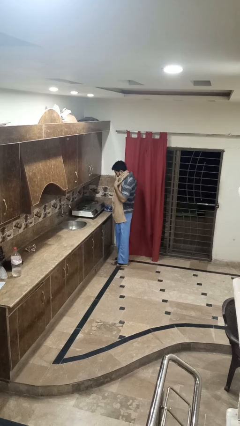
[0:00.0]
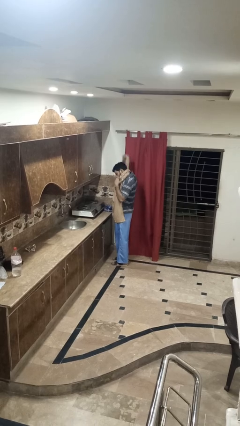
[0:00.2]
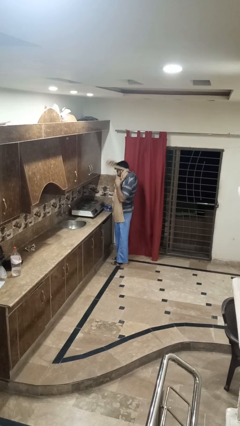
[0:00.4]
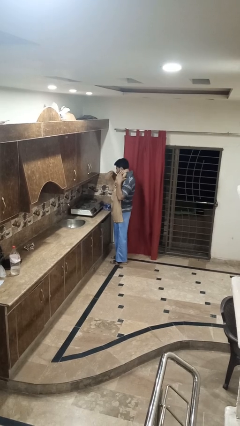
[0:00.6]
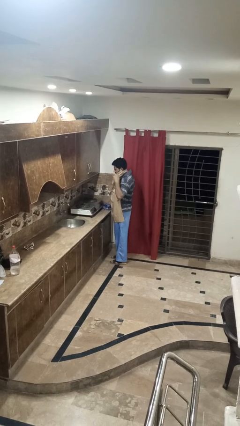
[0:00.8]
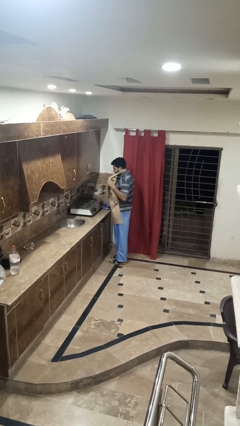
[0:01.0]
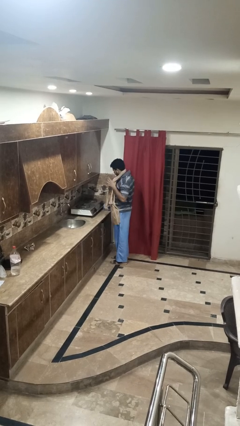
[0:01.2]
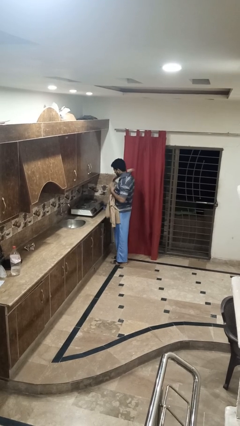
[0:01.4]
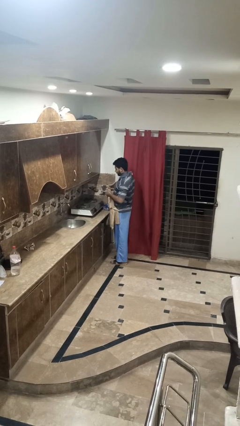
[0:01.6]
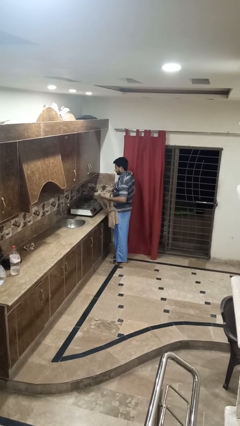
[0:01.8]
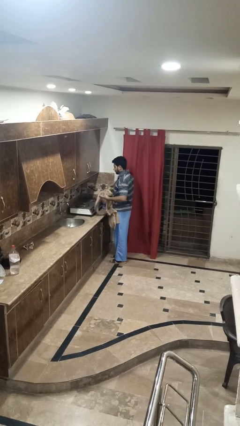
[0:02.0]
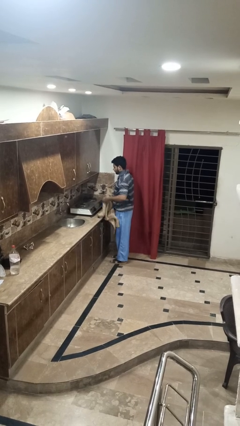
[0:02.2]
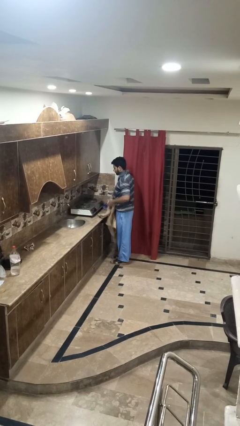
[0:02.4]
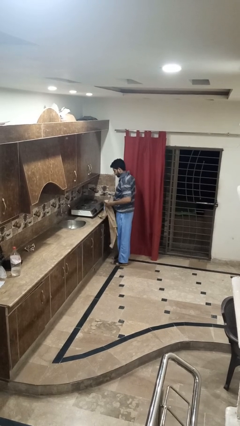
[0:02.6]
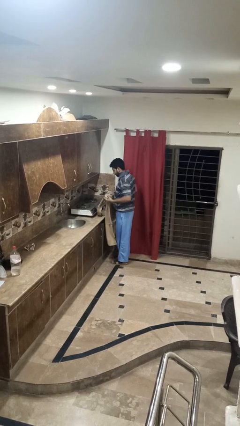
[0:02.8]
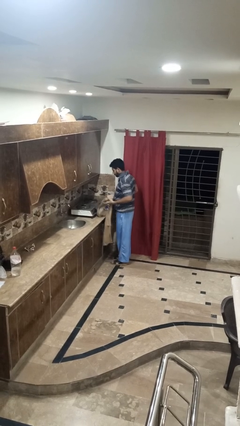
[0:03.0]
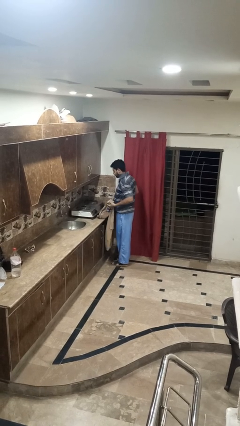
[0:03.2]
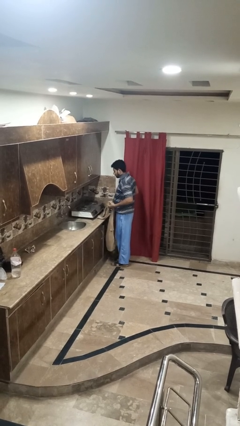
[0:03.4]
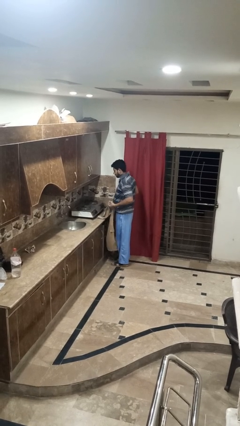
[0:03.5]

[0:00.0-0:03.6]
person takes off apron

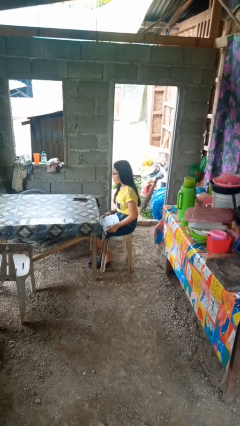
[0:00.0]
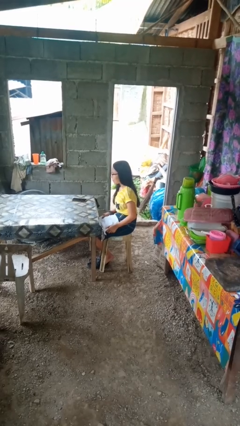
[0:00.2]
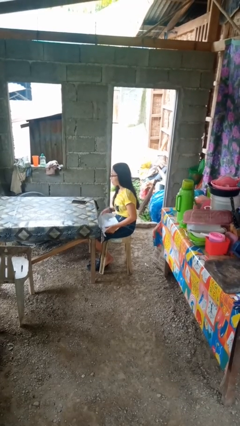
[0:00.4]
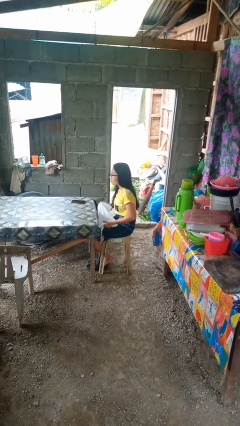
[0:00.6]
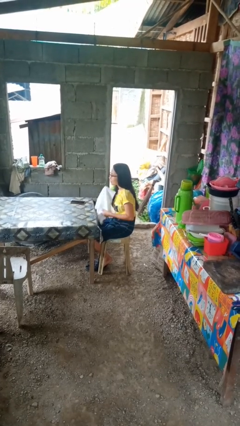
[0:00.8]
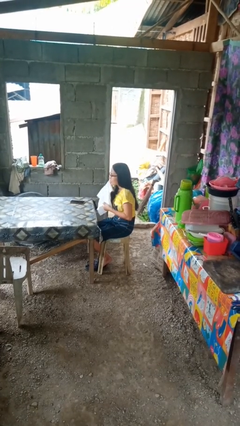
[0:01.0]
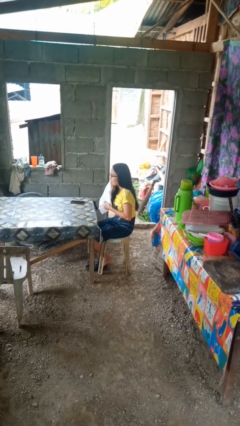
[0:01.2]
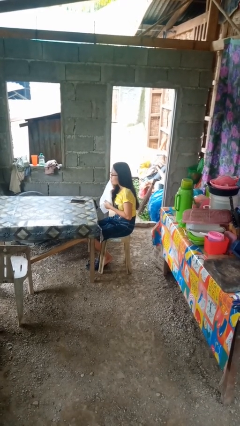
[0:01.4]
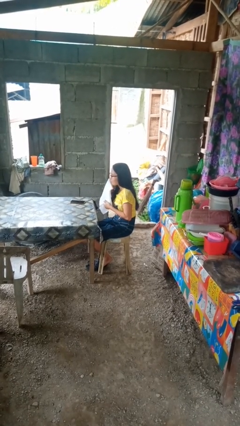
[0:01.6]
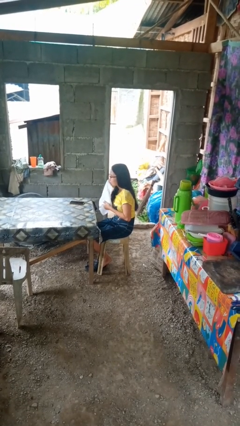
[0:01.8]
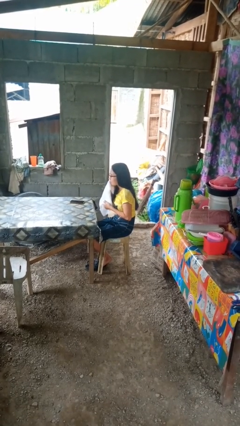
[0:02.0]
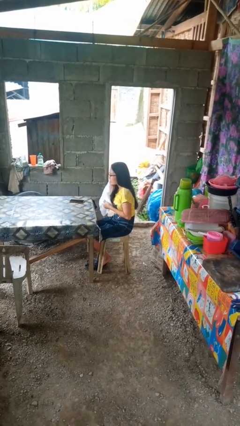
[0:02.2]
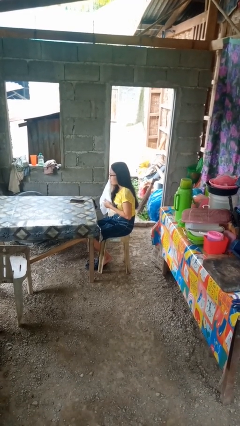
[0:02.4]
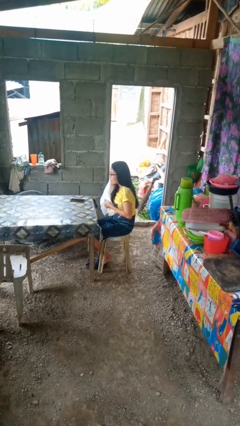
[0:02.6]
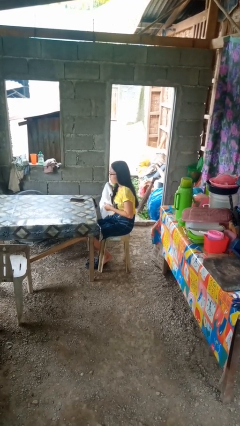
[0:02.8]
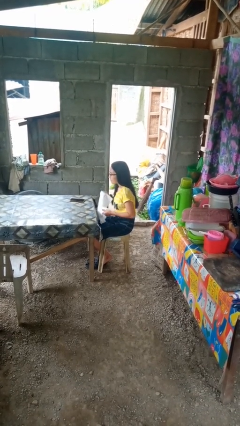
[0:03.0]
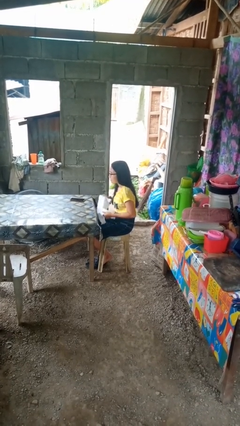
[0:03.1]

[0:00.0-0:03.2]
person wipes mouth with napkin

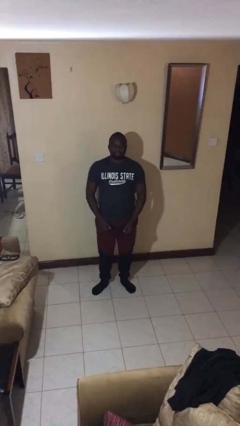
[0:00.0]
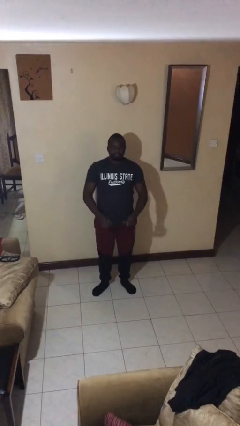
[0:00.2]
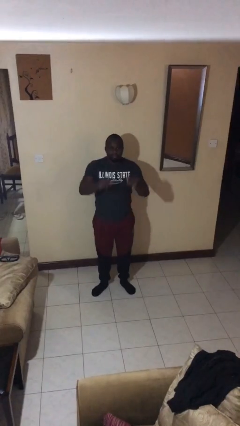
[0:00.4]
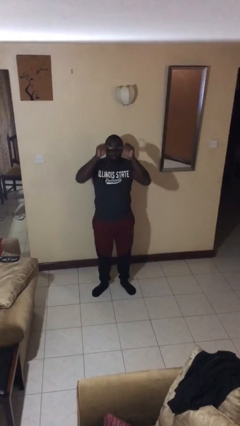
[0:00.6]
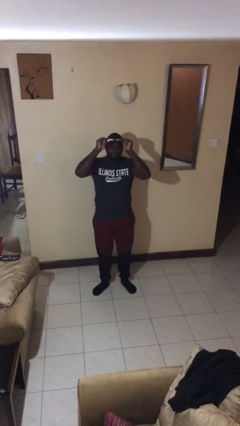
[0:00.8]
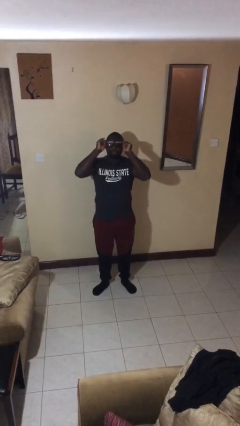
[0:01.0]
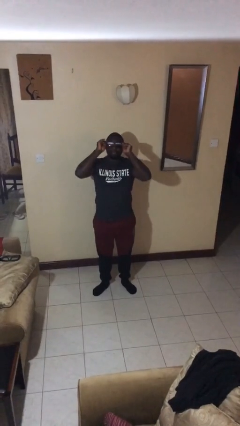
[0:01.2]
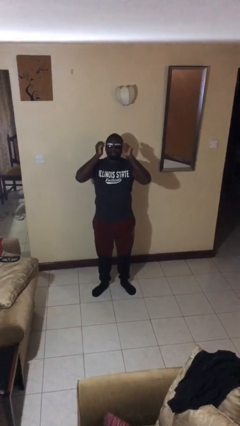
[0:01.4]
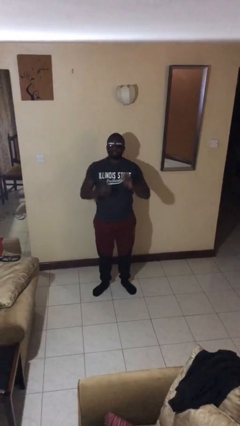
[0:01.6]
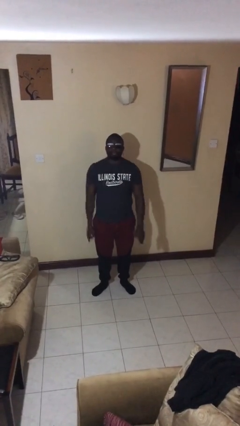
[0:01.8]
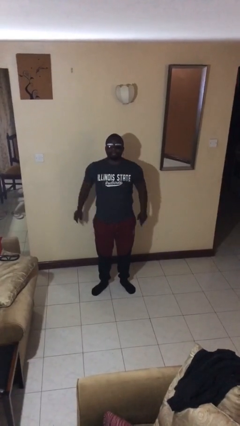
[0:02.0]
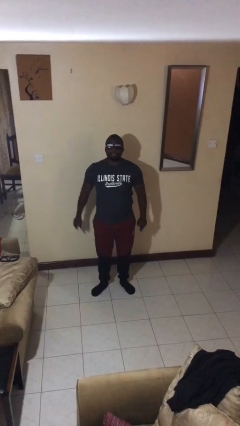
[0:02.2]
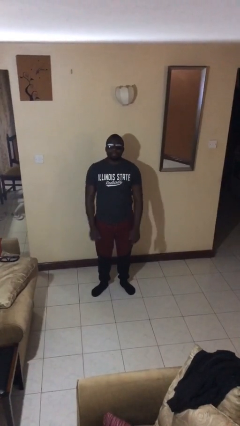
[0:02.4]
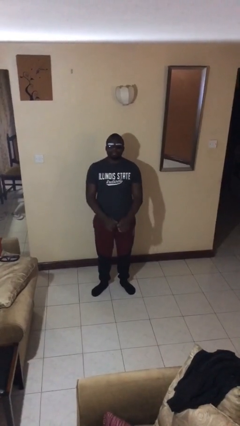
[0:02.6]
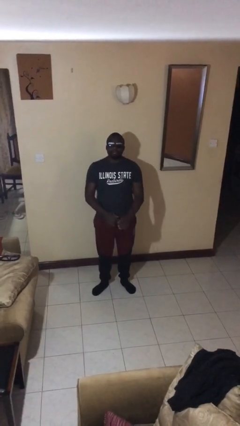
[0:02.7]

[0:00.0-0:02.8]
person puts on sunglasses

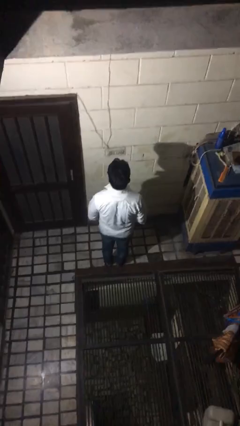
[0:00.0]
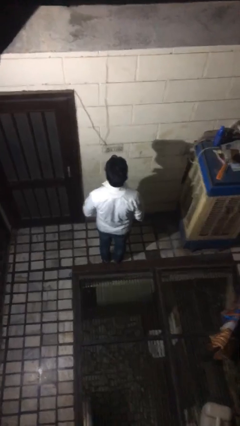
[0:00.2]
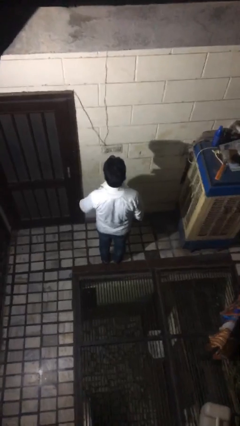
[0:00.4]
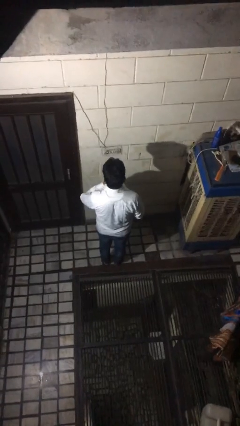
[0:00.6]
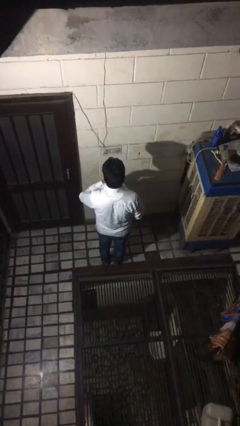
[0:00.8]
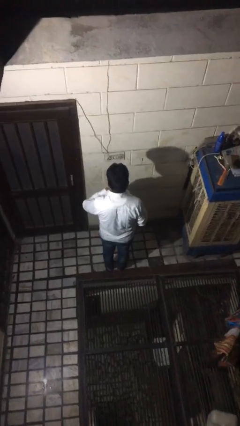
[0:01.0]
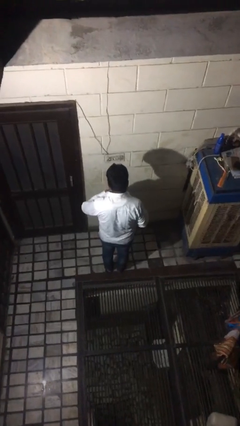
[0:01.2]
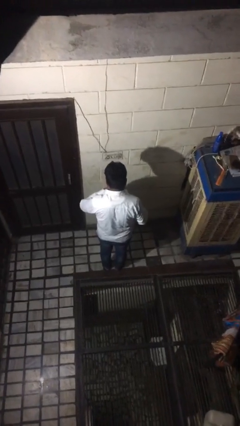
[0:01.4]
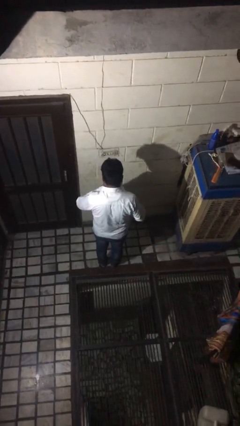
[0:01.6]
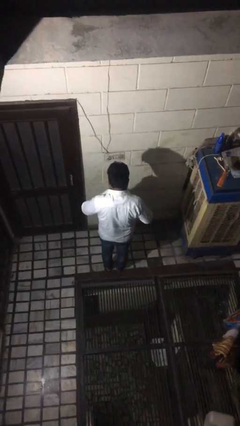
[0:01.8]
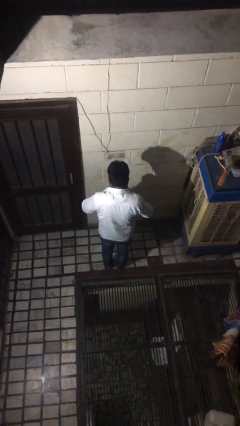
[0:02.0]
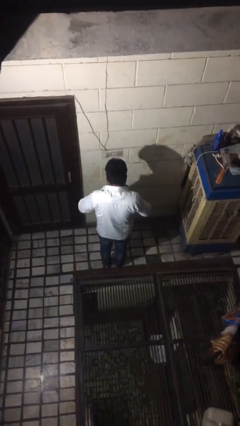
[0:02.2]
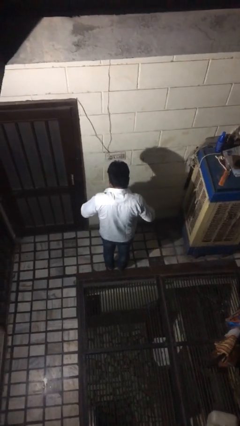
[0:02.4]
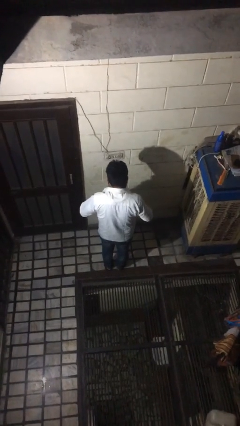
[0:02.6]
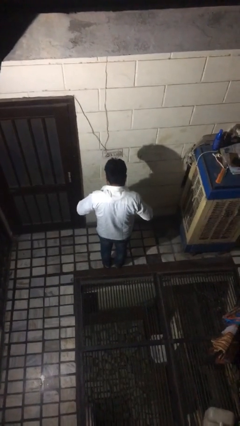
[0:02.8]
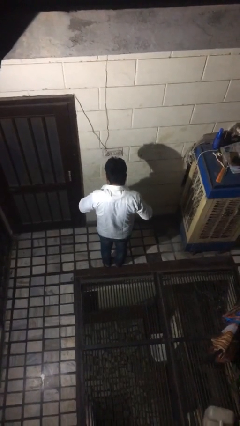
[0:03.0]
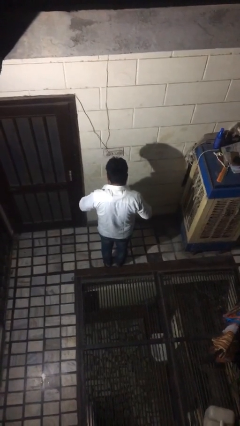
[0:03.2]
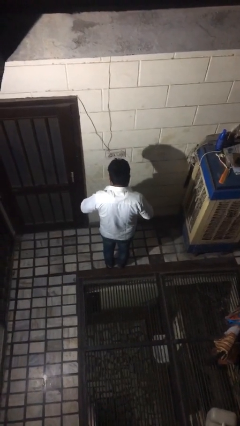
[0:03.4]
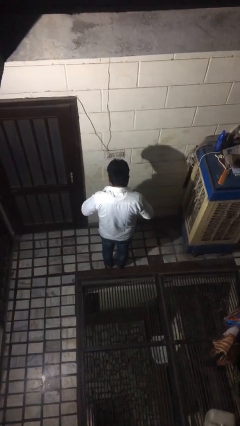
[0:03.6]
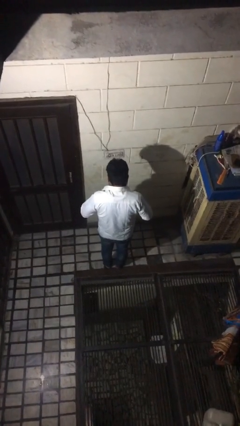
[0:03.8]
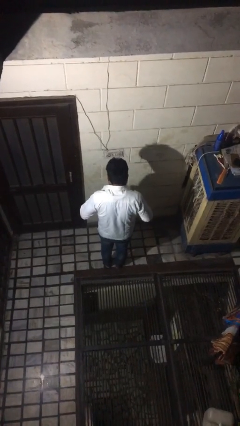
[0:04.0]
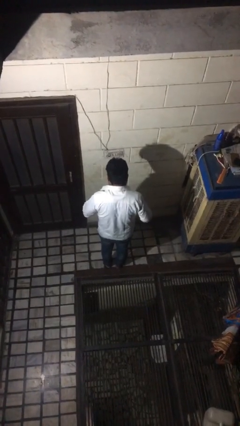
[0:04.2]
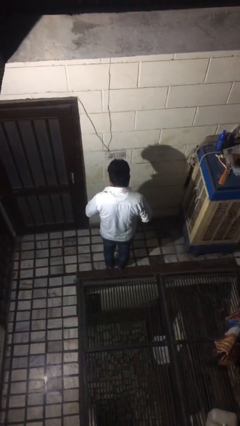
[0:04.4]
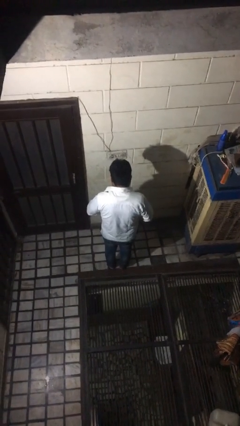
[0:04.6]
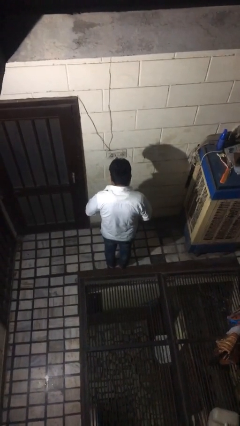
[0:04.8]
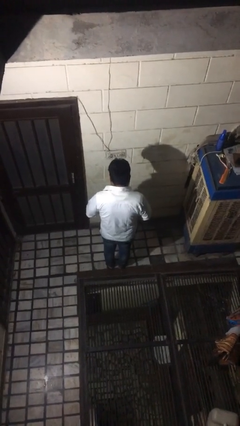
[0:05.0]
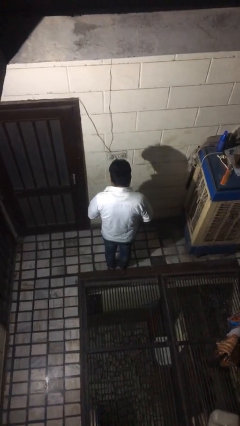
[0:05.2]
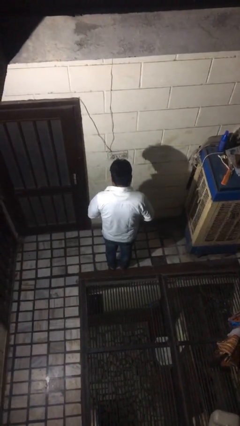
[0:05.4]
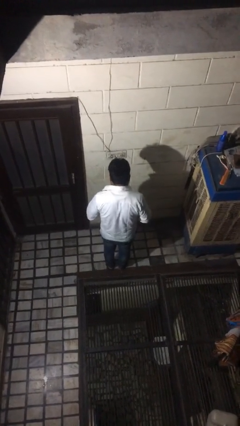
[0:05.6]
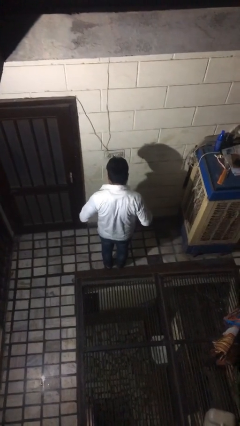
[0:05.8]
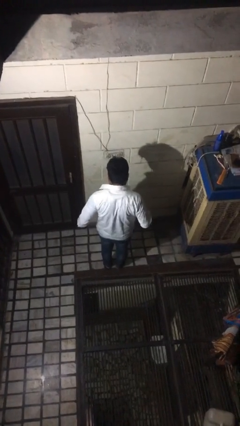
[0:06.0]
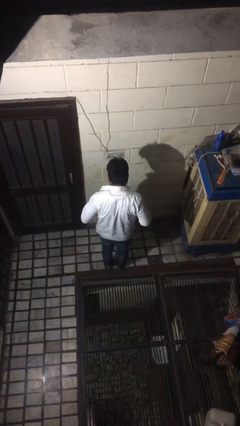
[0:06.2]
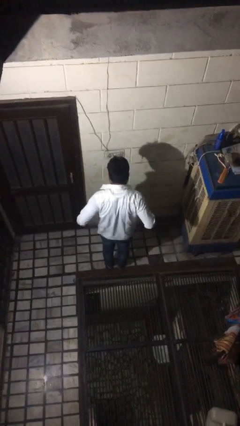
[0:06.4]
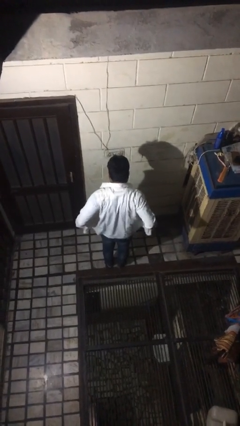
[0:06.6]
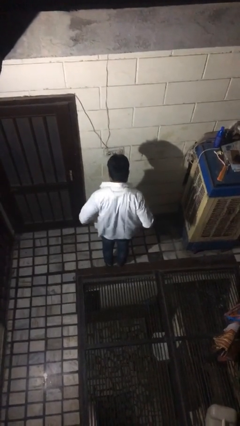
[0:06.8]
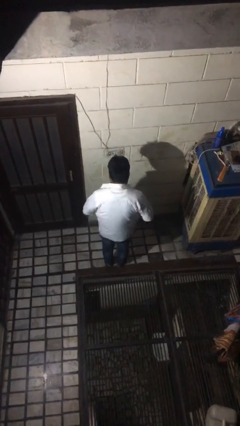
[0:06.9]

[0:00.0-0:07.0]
person unbuttons shirt

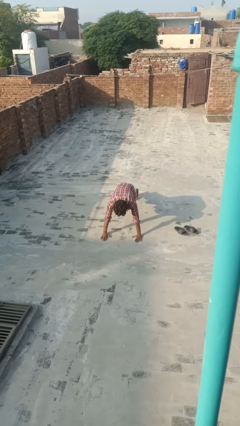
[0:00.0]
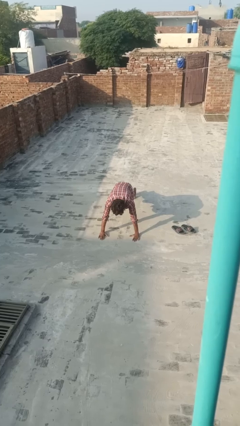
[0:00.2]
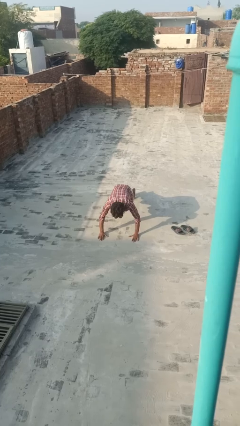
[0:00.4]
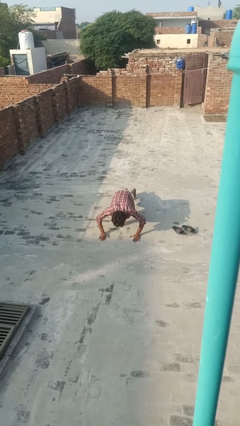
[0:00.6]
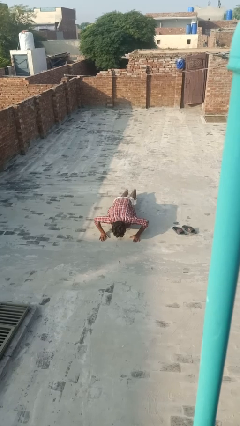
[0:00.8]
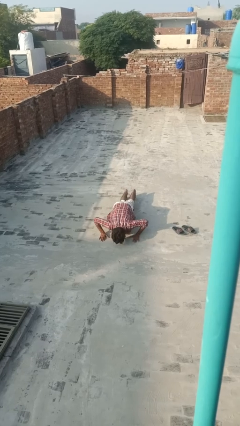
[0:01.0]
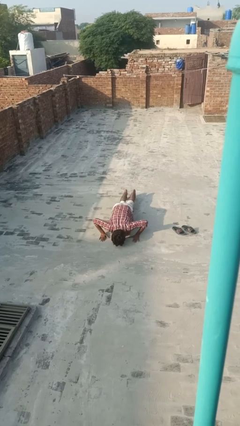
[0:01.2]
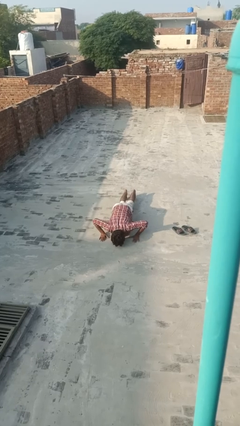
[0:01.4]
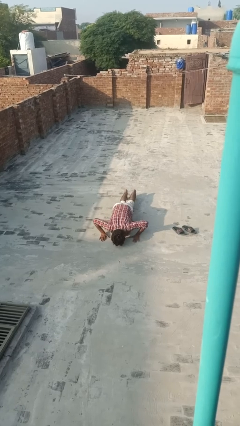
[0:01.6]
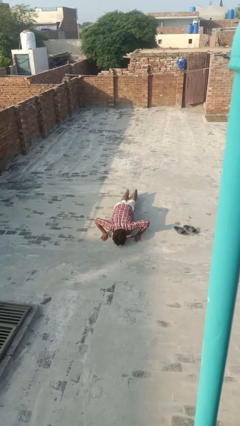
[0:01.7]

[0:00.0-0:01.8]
person exercises with pushup
